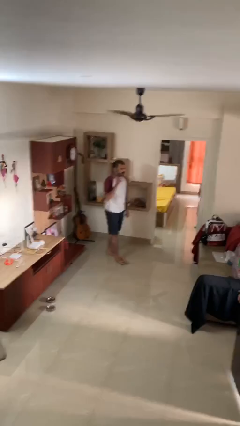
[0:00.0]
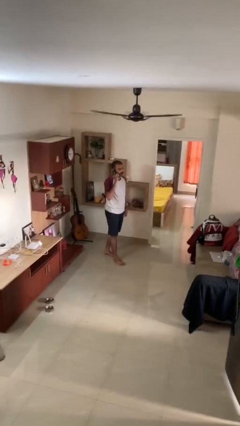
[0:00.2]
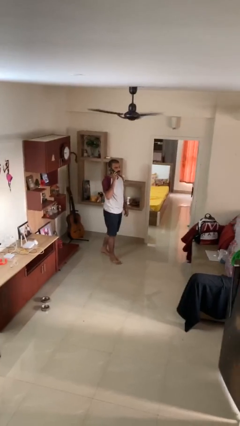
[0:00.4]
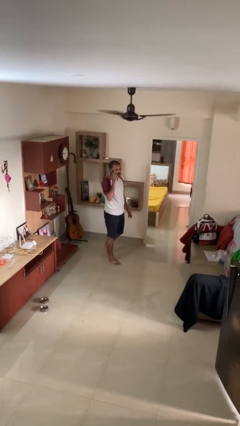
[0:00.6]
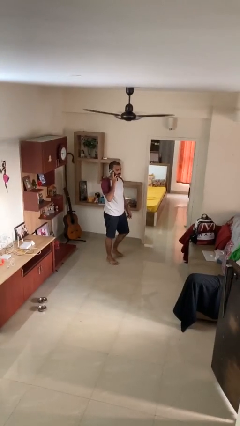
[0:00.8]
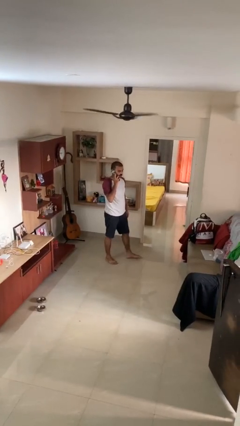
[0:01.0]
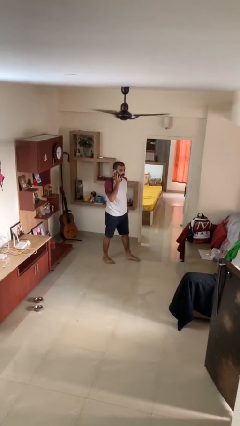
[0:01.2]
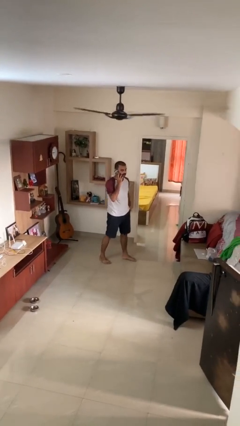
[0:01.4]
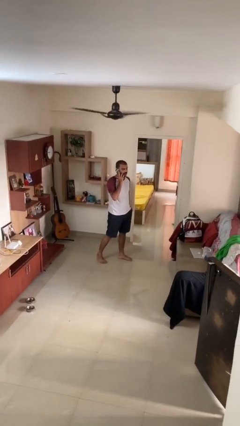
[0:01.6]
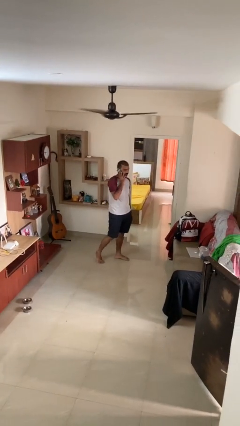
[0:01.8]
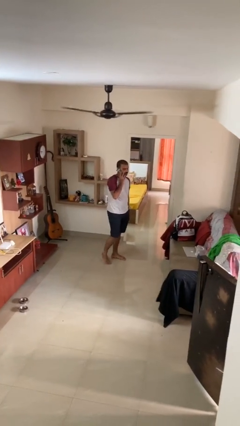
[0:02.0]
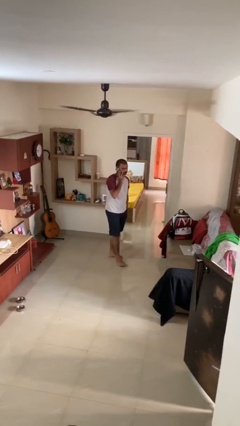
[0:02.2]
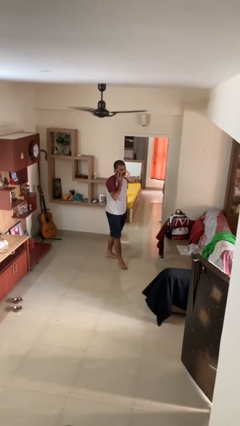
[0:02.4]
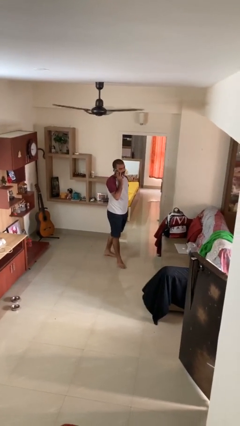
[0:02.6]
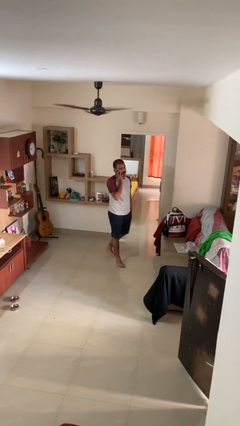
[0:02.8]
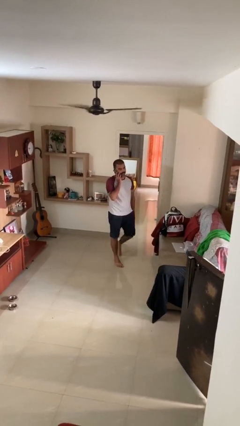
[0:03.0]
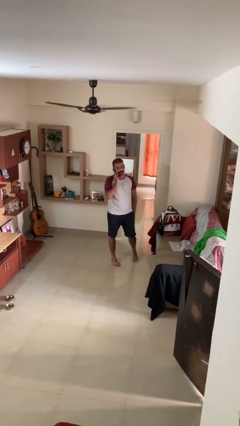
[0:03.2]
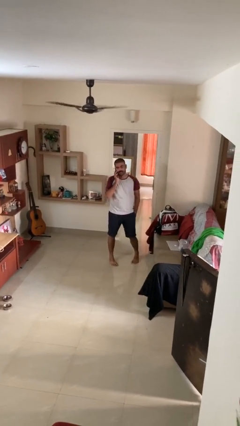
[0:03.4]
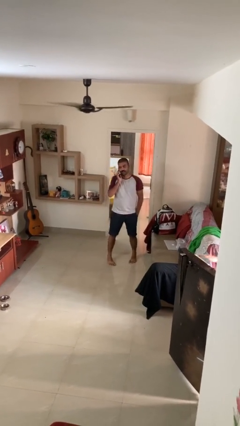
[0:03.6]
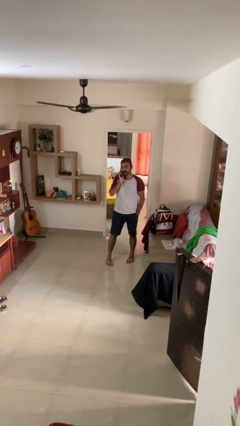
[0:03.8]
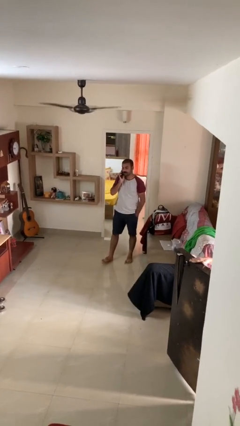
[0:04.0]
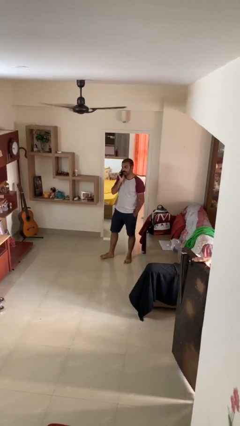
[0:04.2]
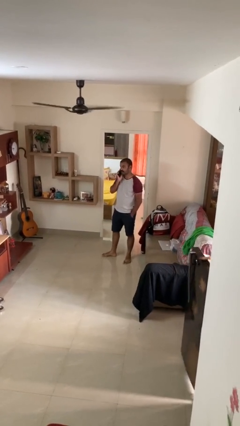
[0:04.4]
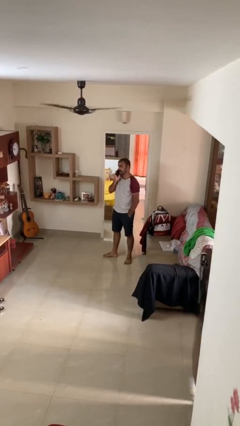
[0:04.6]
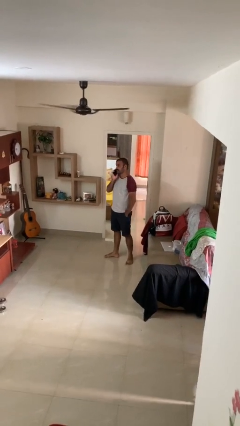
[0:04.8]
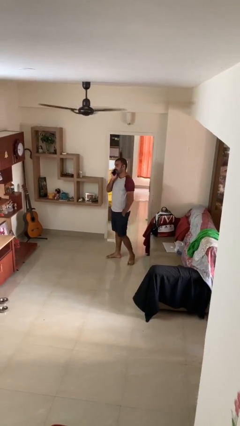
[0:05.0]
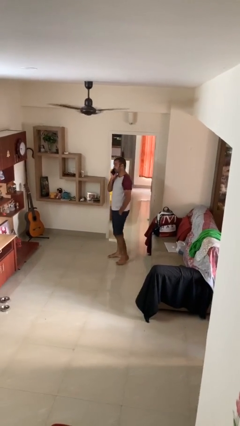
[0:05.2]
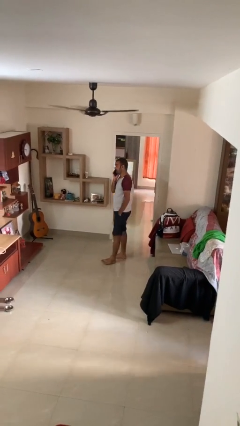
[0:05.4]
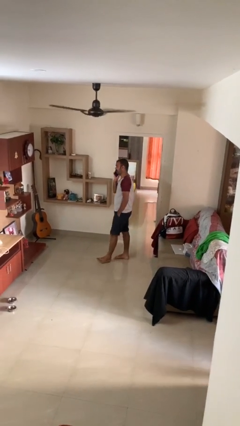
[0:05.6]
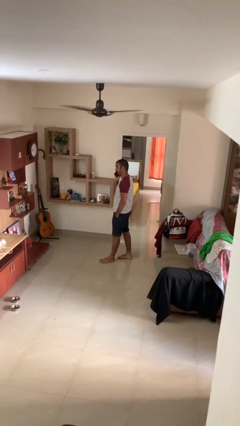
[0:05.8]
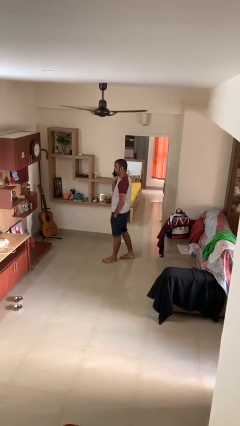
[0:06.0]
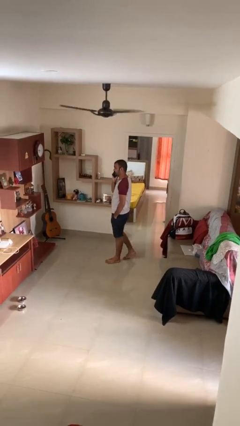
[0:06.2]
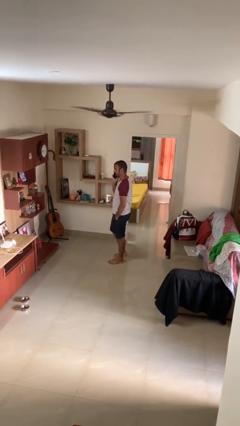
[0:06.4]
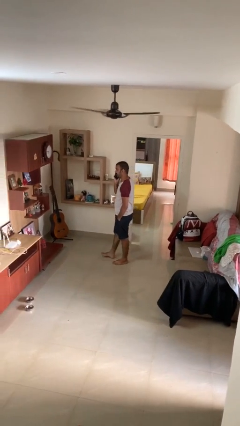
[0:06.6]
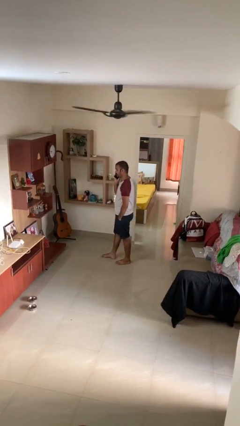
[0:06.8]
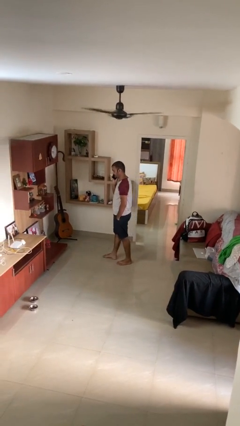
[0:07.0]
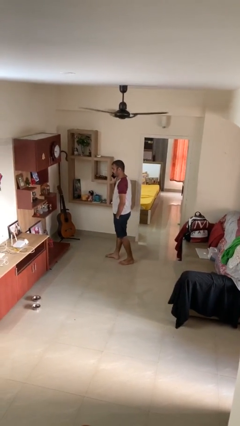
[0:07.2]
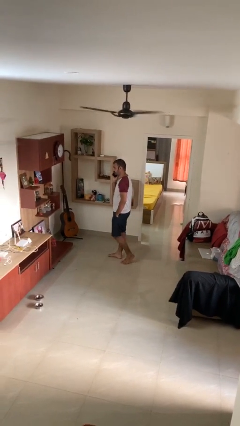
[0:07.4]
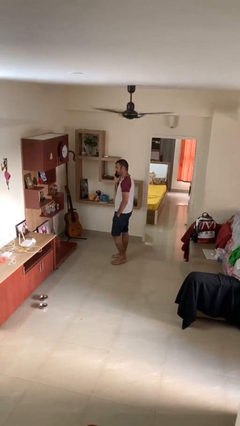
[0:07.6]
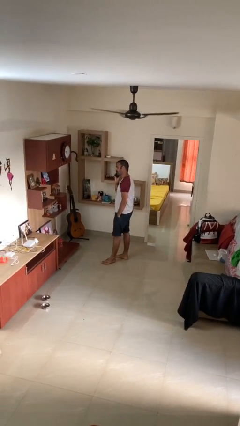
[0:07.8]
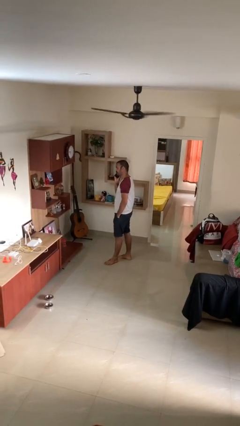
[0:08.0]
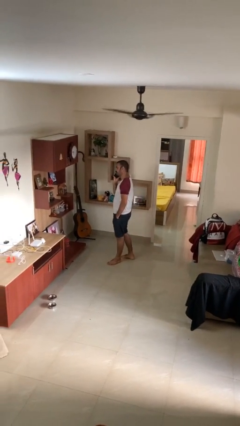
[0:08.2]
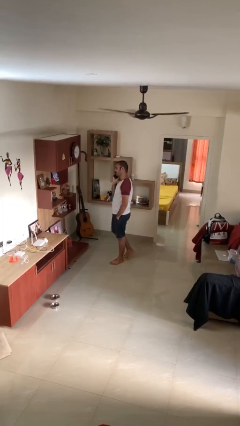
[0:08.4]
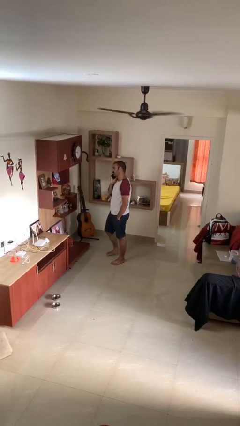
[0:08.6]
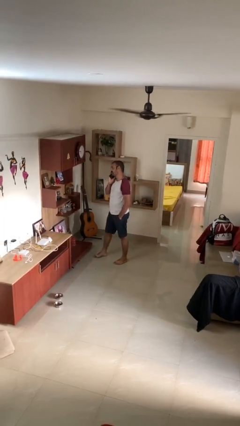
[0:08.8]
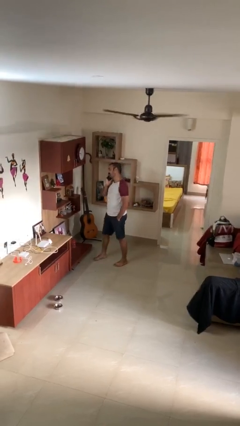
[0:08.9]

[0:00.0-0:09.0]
person talks on phone

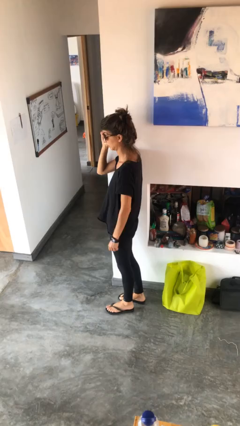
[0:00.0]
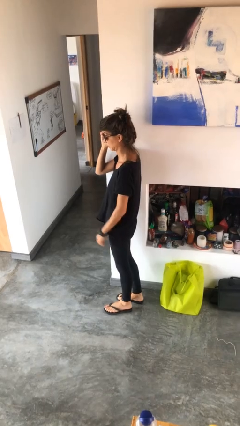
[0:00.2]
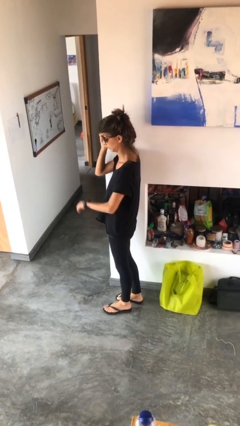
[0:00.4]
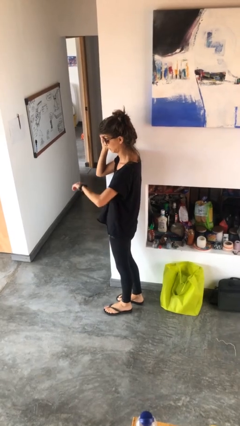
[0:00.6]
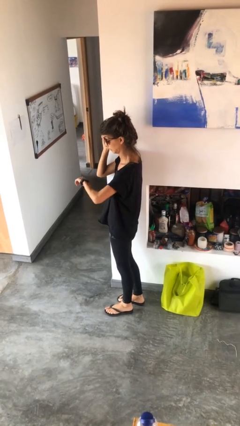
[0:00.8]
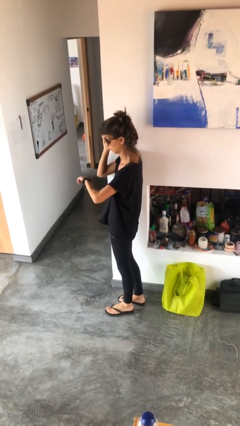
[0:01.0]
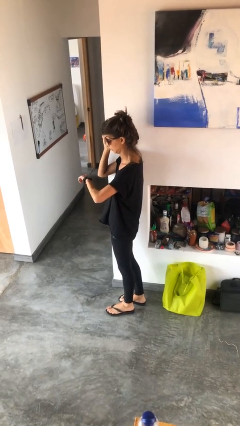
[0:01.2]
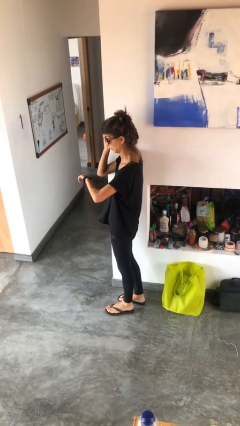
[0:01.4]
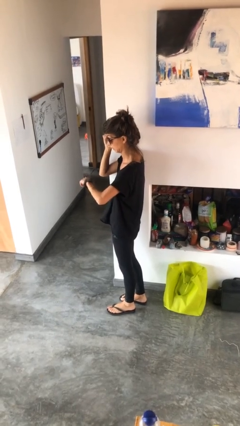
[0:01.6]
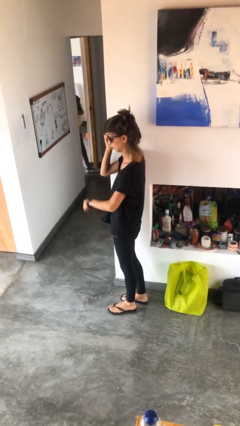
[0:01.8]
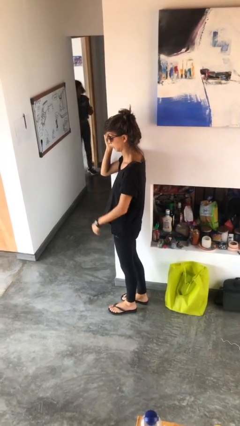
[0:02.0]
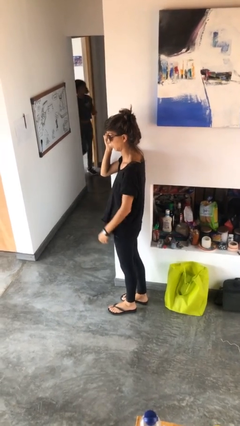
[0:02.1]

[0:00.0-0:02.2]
person looks at wristwatch

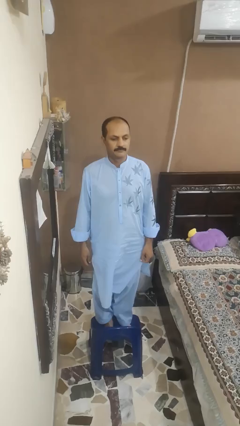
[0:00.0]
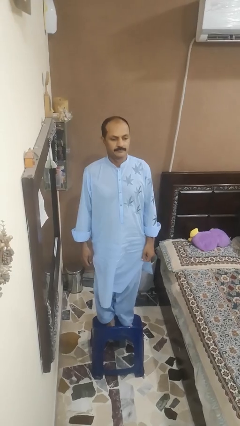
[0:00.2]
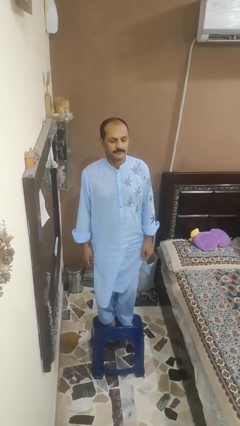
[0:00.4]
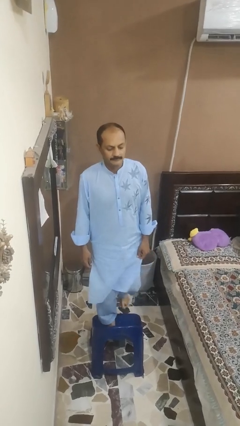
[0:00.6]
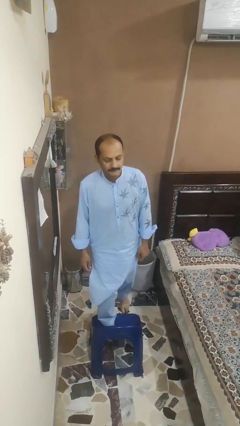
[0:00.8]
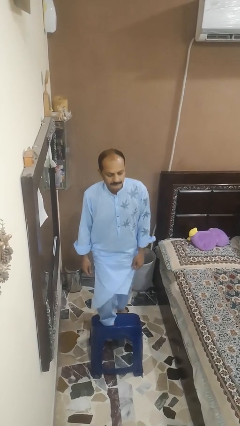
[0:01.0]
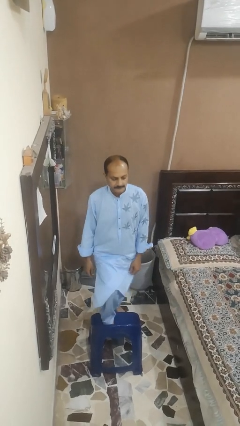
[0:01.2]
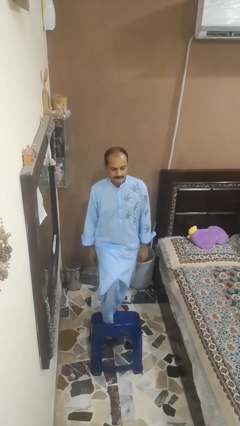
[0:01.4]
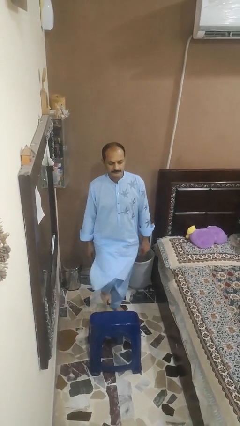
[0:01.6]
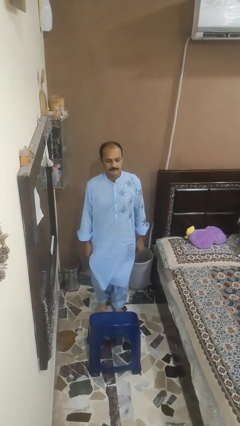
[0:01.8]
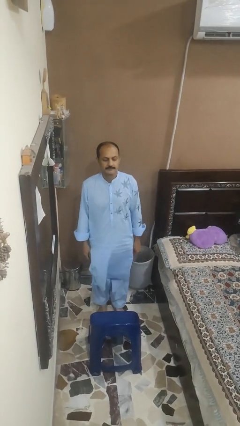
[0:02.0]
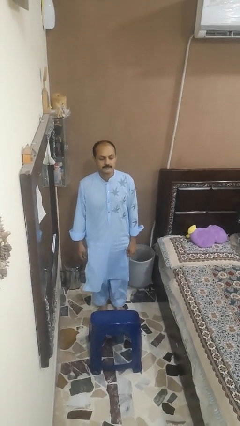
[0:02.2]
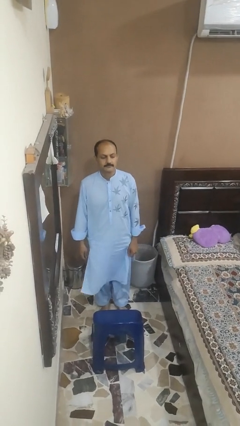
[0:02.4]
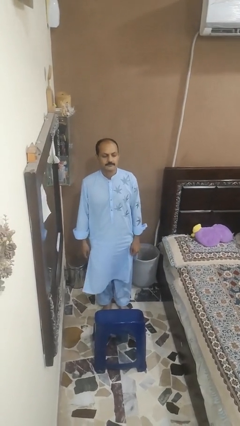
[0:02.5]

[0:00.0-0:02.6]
person climbs off chair

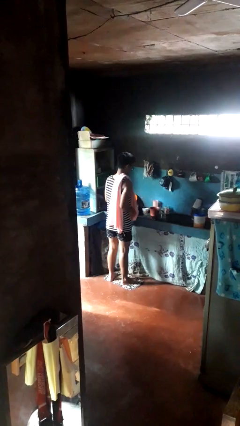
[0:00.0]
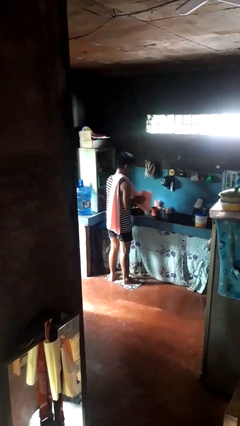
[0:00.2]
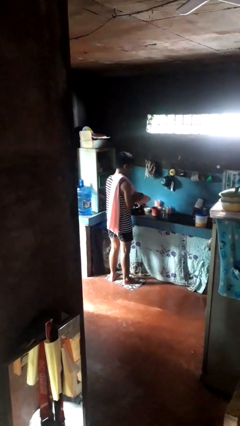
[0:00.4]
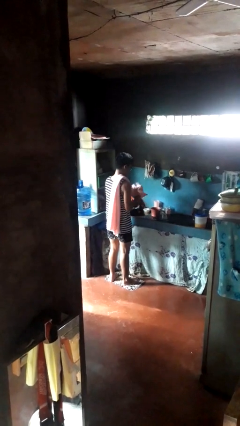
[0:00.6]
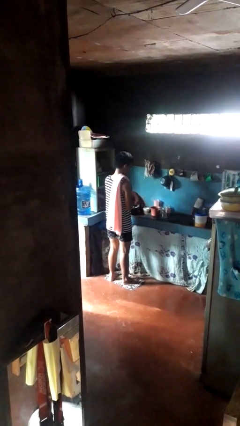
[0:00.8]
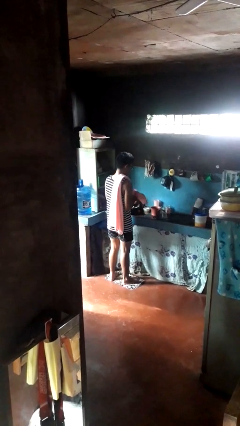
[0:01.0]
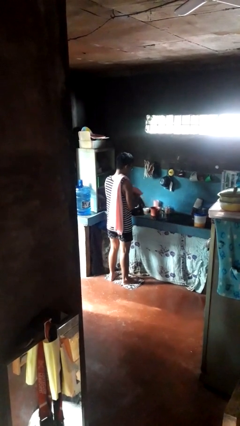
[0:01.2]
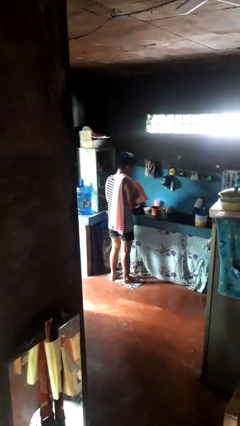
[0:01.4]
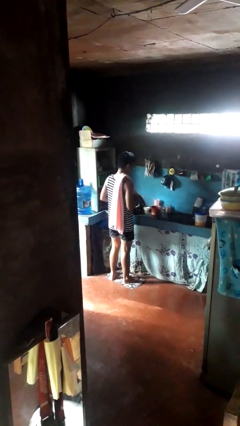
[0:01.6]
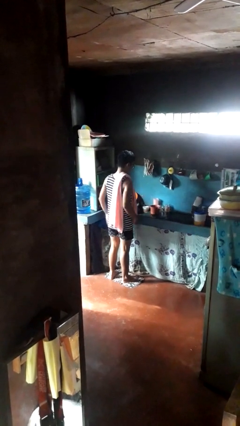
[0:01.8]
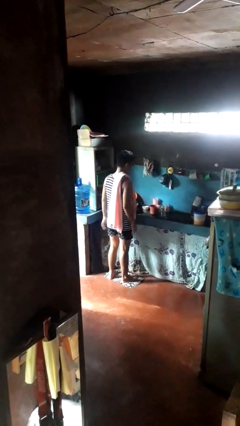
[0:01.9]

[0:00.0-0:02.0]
person dries hands with towel

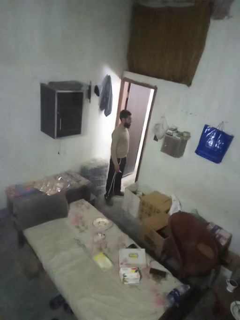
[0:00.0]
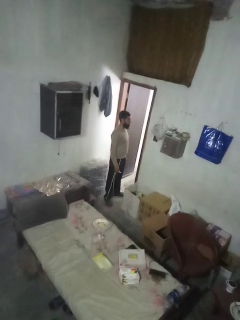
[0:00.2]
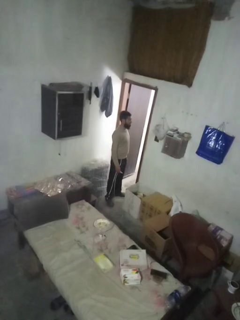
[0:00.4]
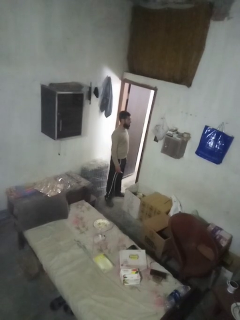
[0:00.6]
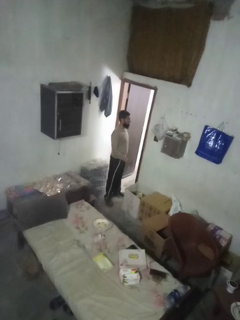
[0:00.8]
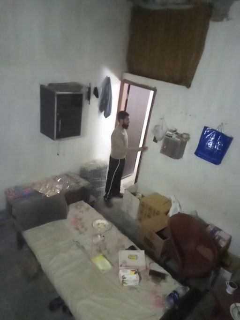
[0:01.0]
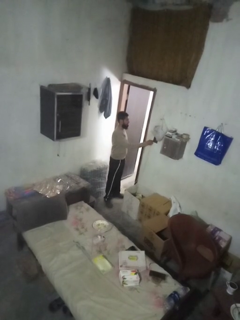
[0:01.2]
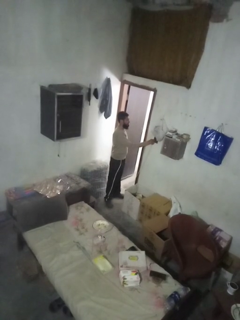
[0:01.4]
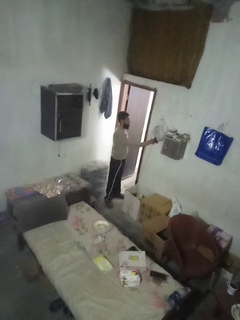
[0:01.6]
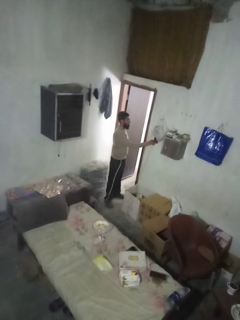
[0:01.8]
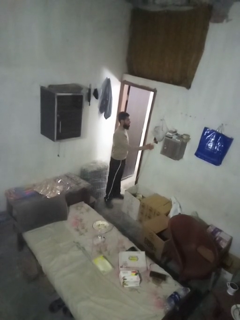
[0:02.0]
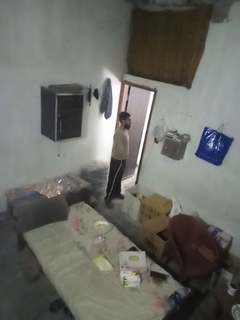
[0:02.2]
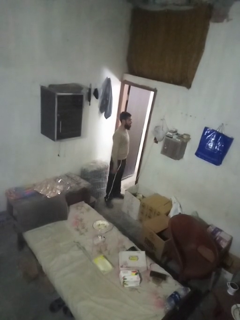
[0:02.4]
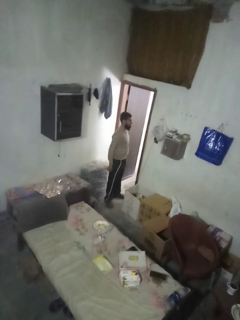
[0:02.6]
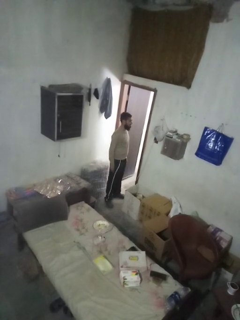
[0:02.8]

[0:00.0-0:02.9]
person plugs into electrical socket
